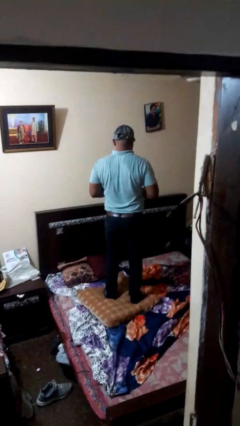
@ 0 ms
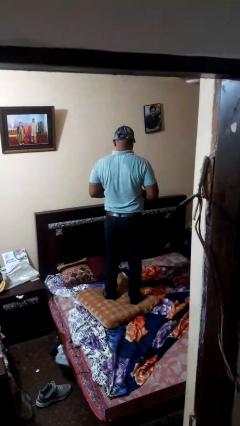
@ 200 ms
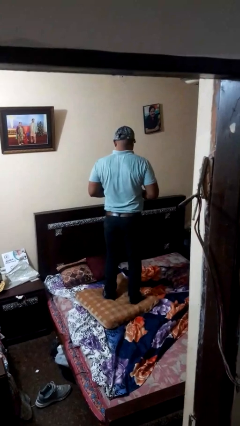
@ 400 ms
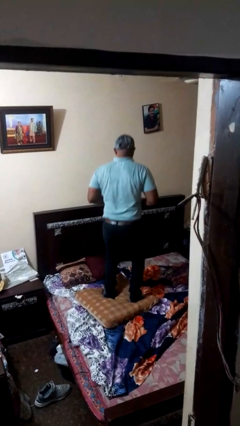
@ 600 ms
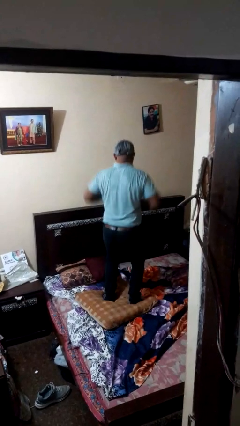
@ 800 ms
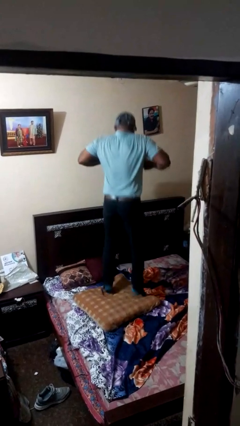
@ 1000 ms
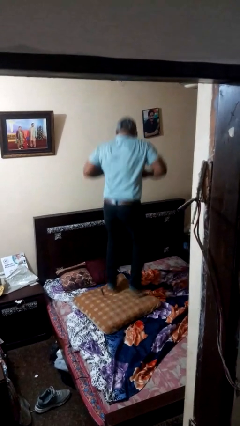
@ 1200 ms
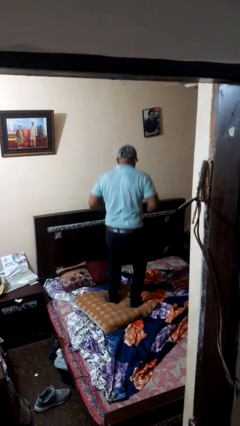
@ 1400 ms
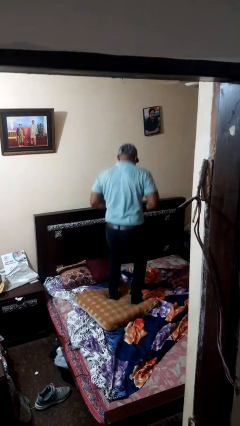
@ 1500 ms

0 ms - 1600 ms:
person jumps on bed

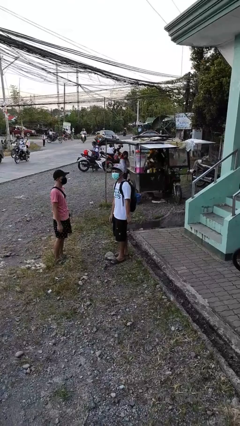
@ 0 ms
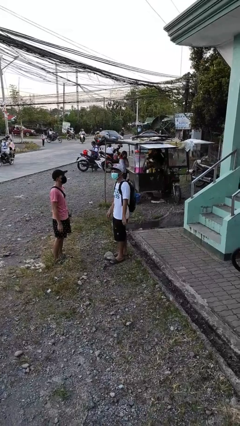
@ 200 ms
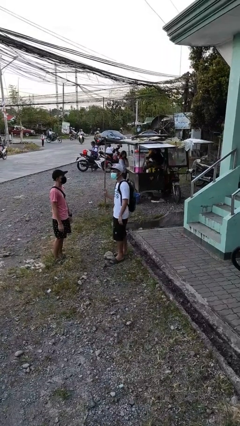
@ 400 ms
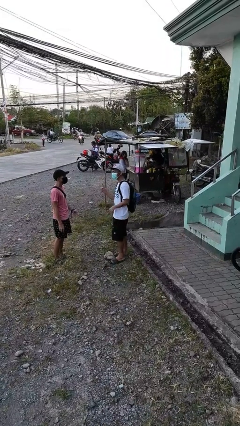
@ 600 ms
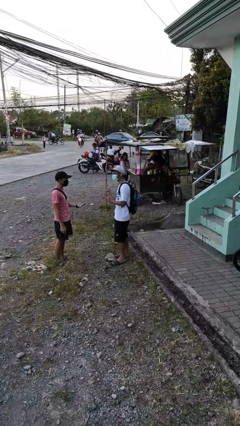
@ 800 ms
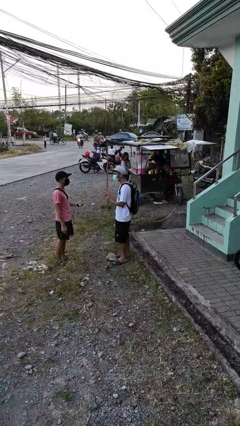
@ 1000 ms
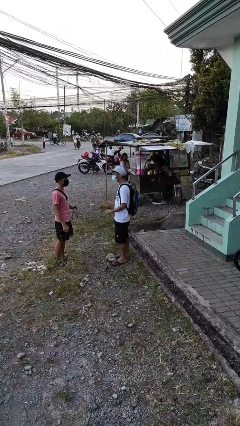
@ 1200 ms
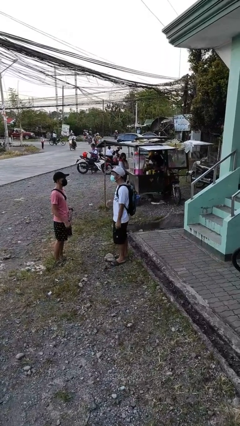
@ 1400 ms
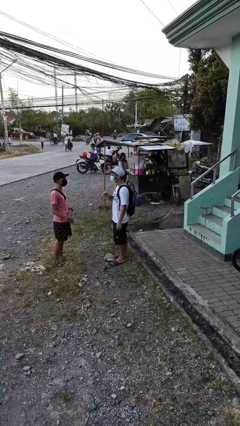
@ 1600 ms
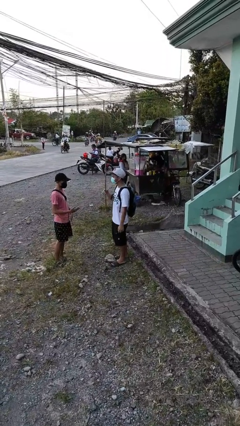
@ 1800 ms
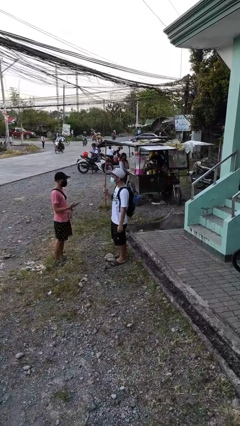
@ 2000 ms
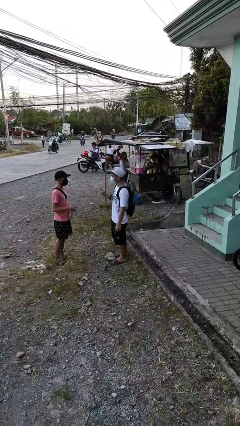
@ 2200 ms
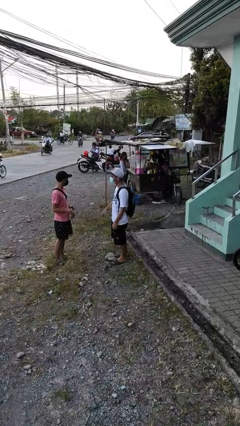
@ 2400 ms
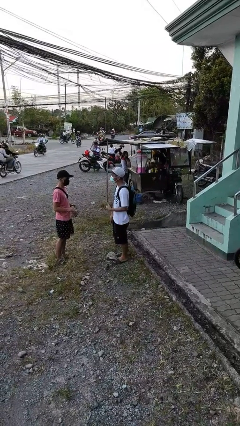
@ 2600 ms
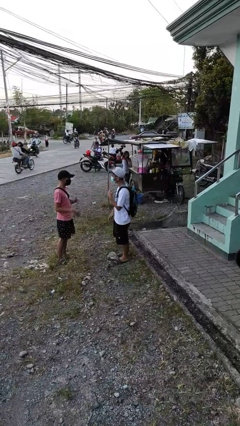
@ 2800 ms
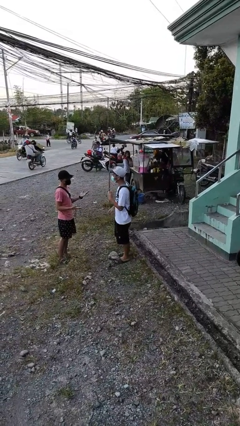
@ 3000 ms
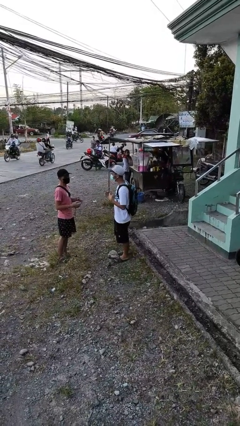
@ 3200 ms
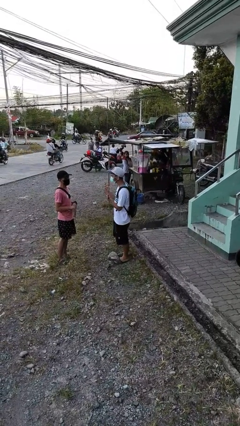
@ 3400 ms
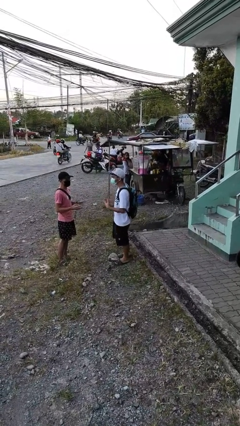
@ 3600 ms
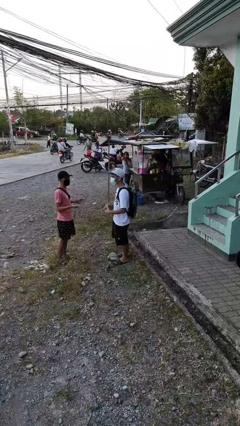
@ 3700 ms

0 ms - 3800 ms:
person talks to person

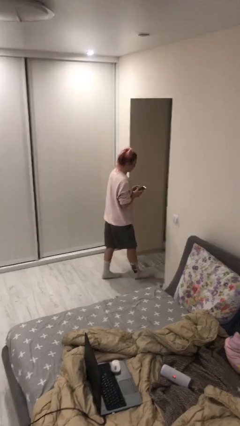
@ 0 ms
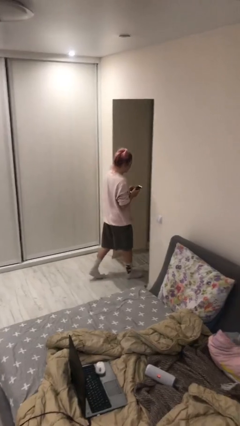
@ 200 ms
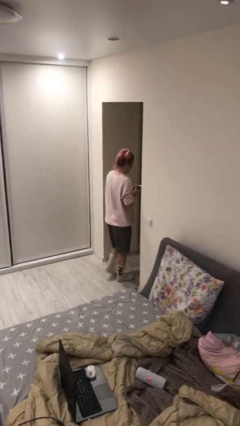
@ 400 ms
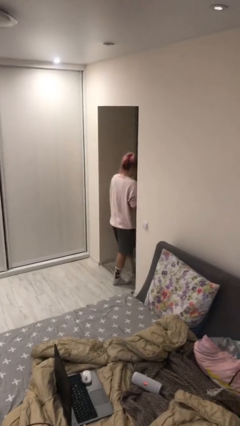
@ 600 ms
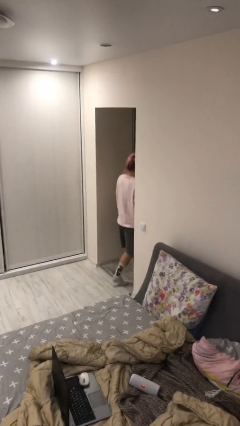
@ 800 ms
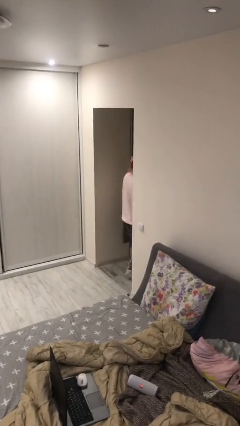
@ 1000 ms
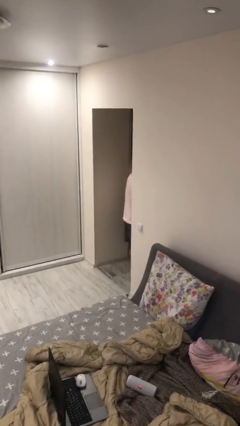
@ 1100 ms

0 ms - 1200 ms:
person exits scene through structure

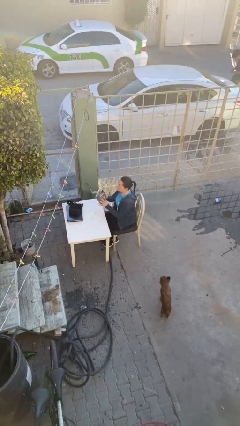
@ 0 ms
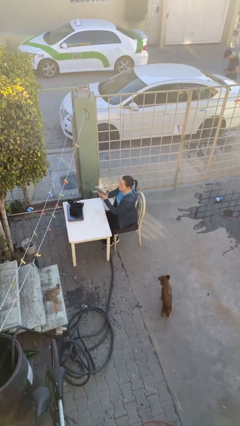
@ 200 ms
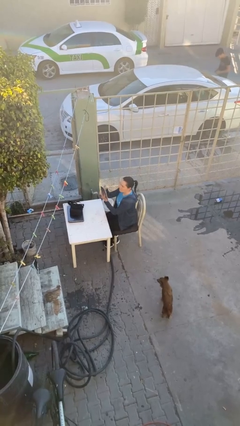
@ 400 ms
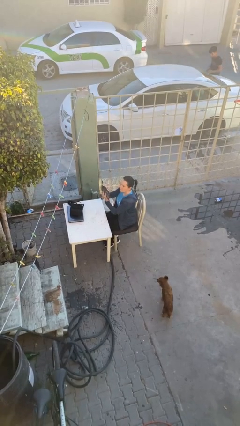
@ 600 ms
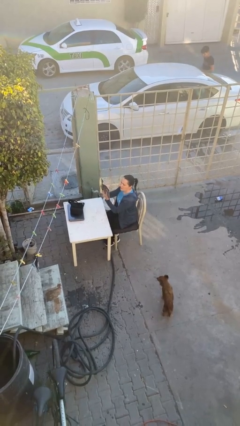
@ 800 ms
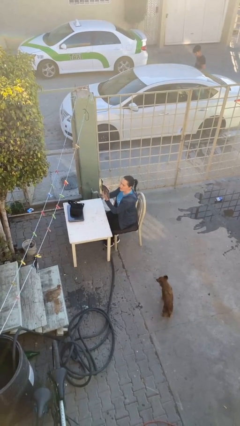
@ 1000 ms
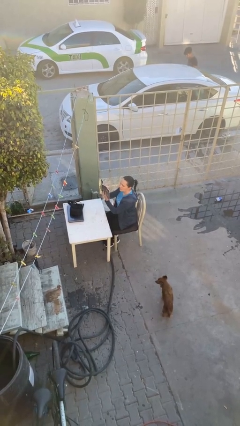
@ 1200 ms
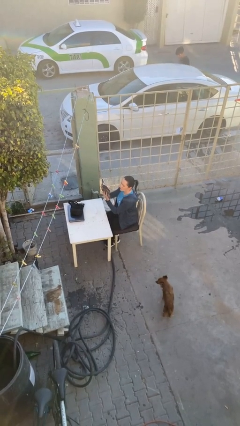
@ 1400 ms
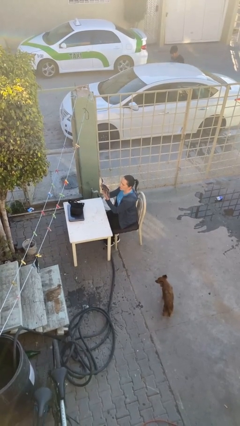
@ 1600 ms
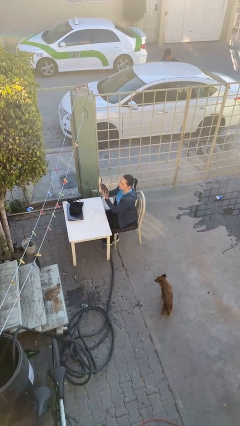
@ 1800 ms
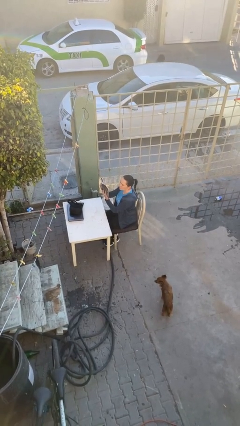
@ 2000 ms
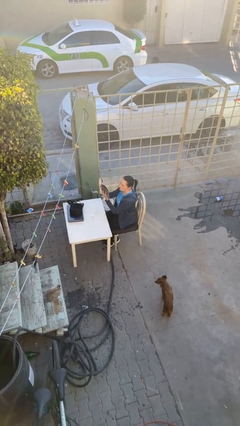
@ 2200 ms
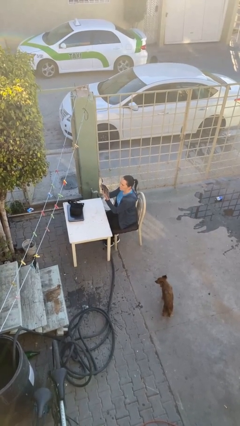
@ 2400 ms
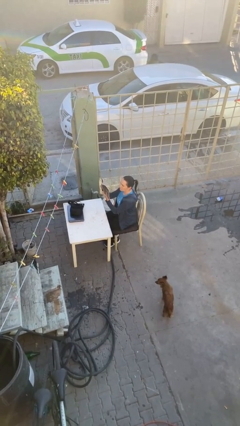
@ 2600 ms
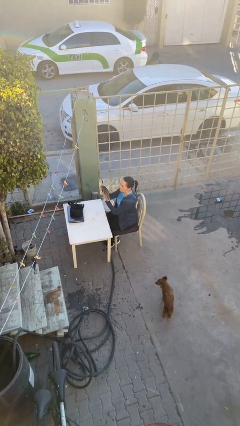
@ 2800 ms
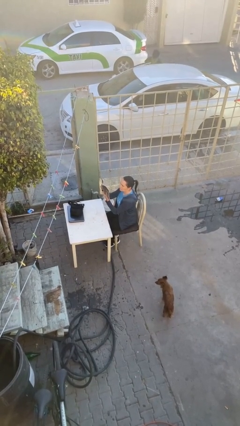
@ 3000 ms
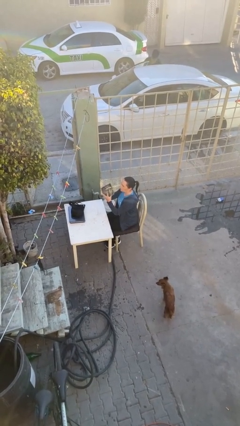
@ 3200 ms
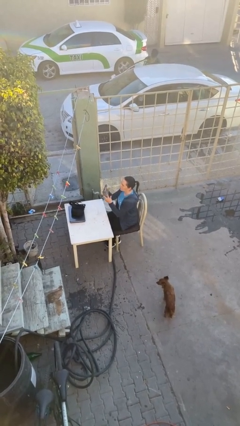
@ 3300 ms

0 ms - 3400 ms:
person reads document

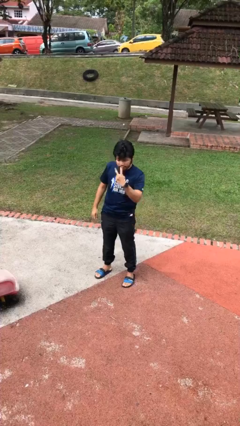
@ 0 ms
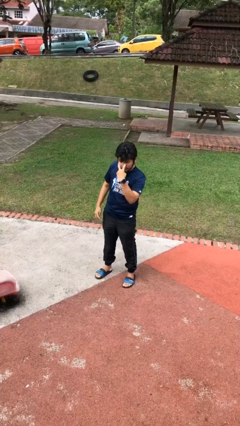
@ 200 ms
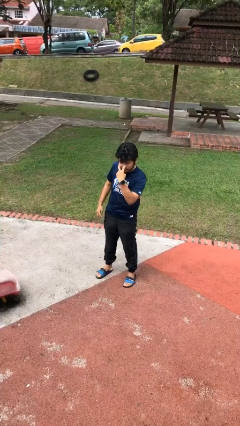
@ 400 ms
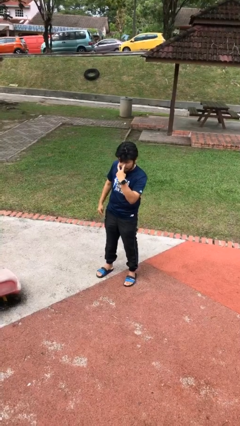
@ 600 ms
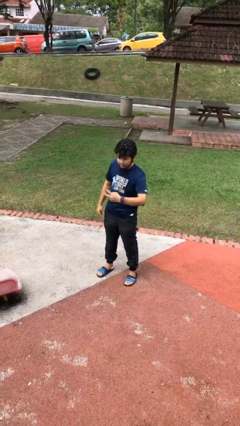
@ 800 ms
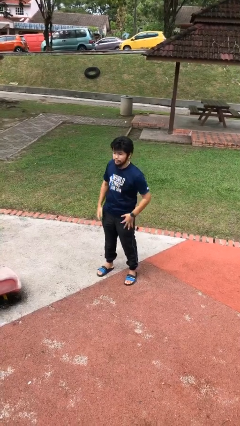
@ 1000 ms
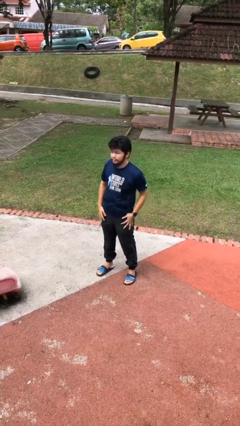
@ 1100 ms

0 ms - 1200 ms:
person gestures watch closely

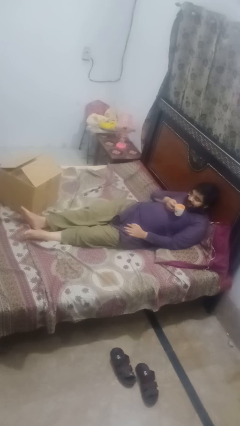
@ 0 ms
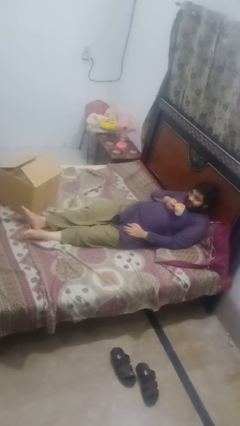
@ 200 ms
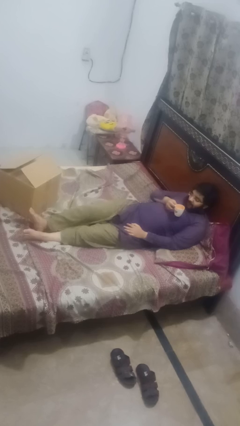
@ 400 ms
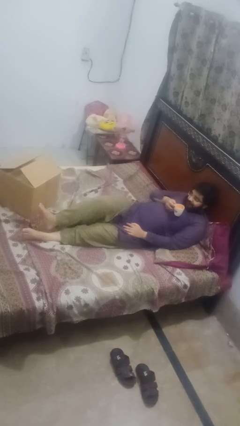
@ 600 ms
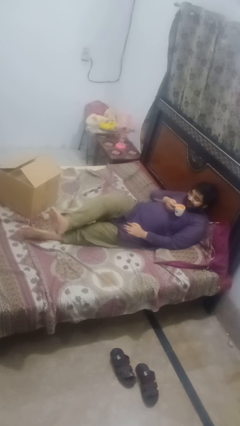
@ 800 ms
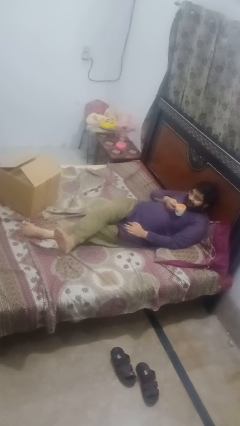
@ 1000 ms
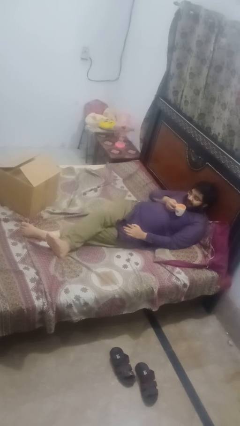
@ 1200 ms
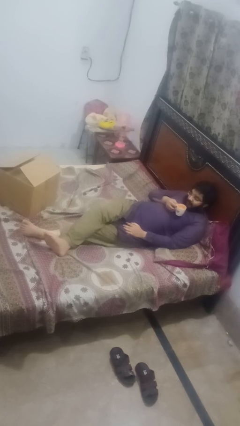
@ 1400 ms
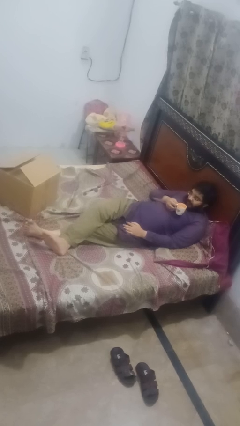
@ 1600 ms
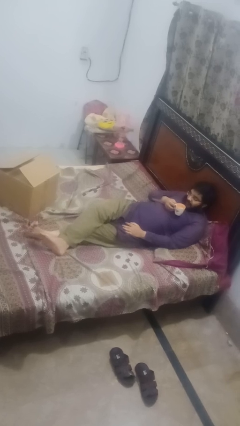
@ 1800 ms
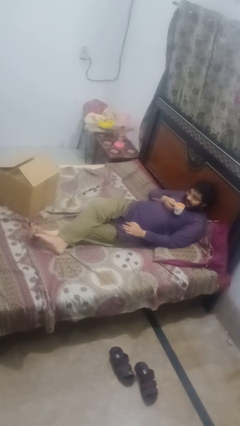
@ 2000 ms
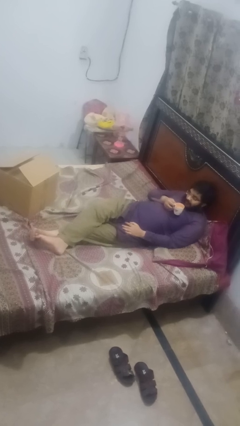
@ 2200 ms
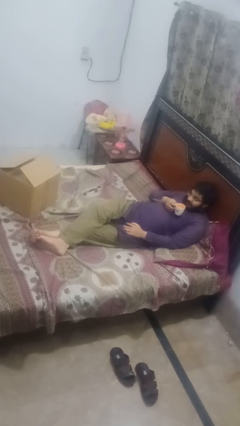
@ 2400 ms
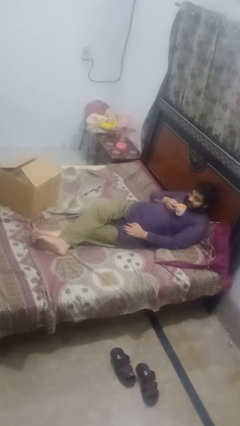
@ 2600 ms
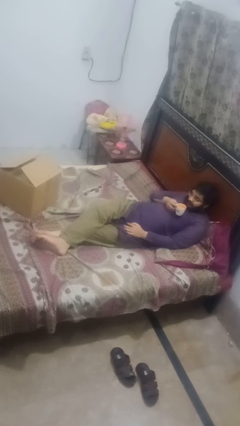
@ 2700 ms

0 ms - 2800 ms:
person crosses legs

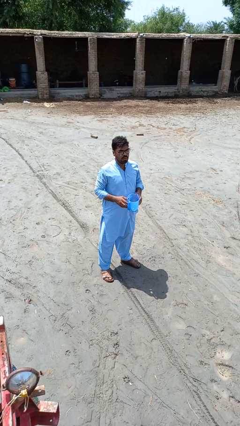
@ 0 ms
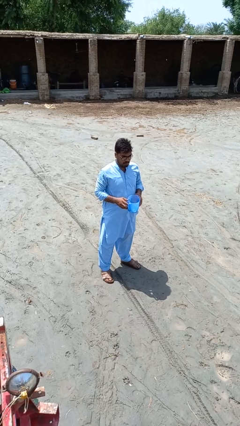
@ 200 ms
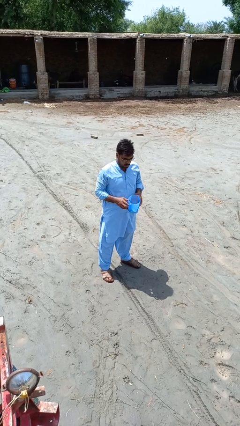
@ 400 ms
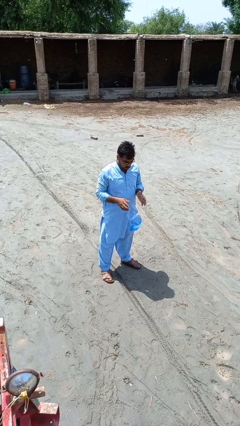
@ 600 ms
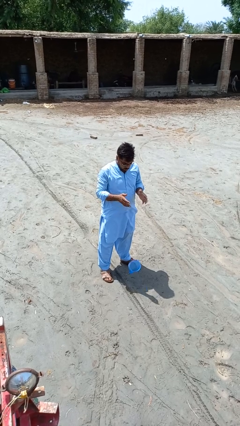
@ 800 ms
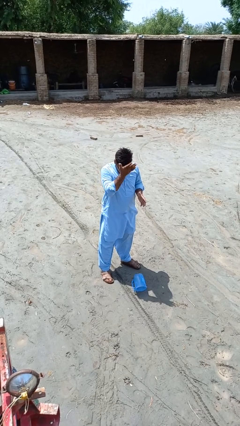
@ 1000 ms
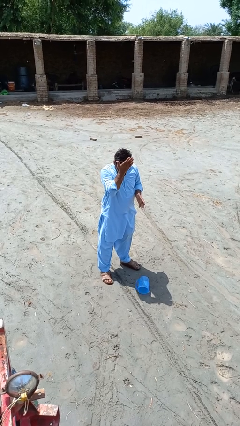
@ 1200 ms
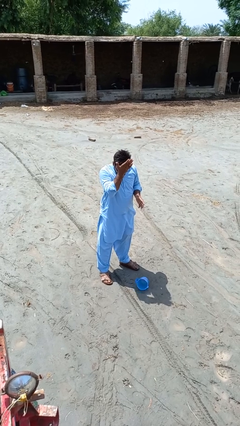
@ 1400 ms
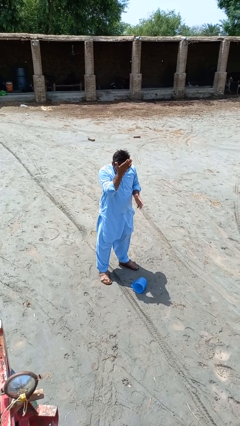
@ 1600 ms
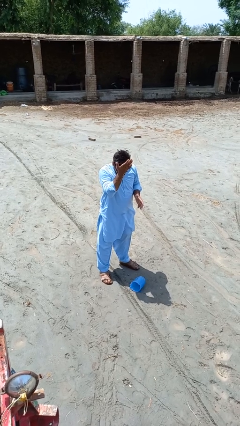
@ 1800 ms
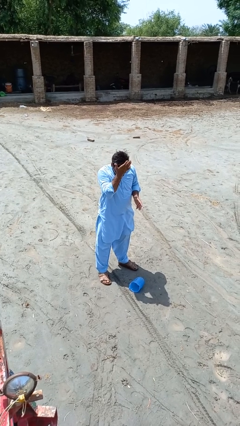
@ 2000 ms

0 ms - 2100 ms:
person drops object

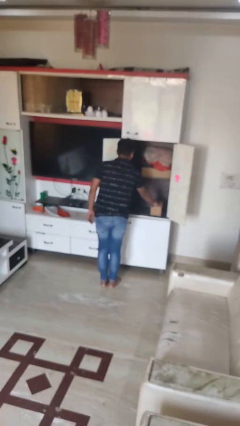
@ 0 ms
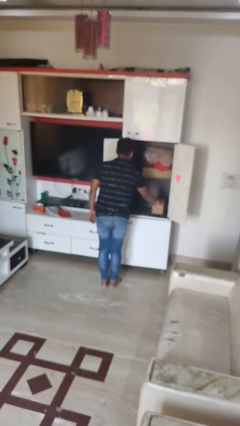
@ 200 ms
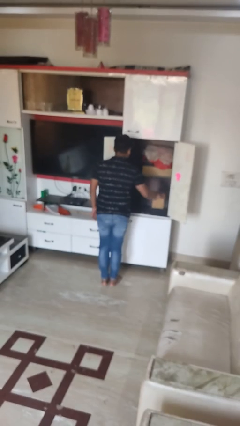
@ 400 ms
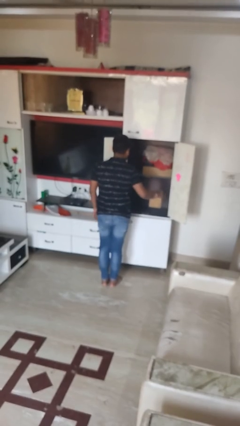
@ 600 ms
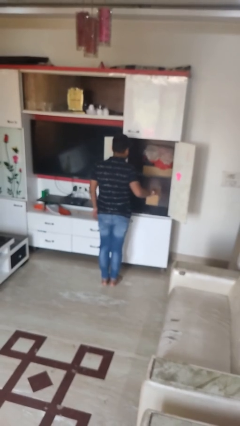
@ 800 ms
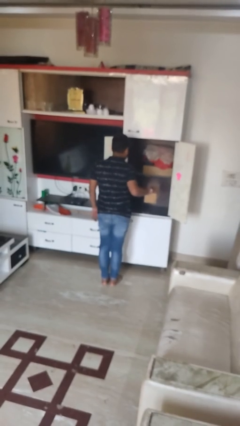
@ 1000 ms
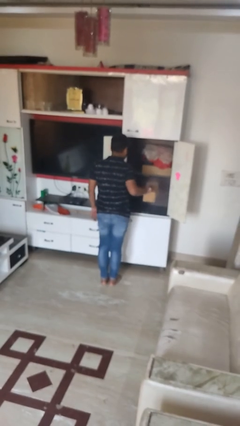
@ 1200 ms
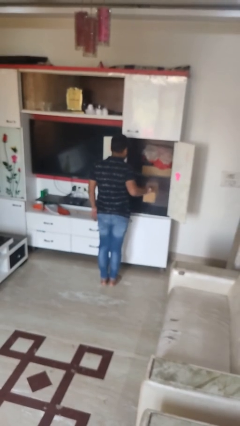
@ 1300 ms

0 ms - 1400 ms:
person picks up object from cabinet
